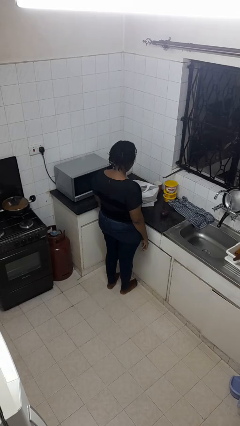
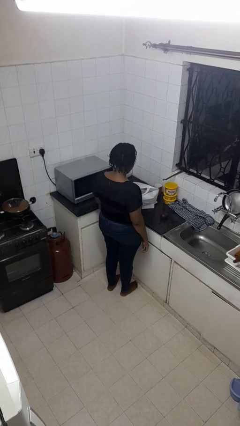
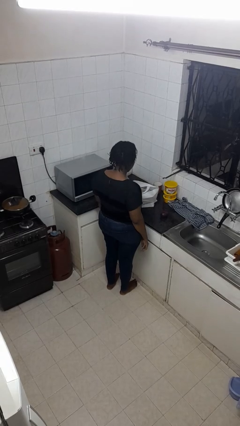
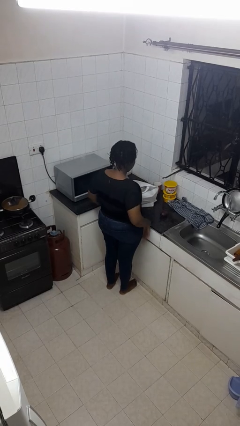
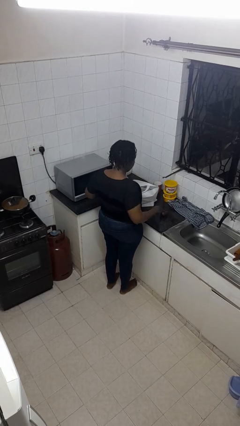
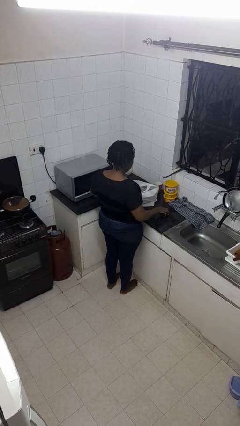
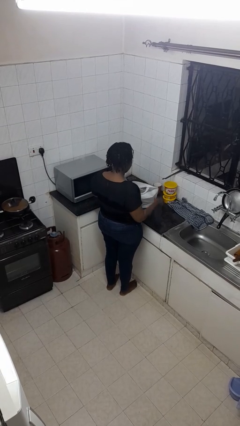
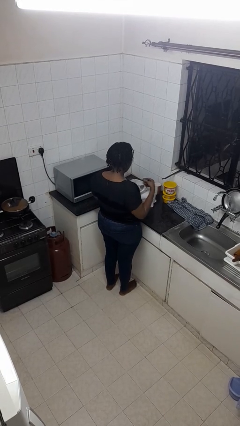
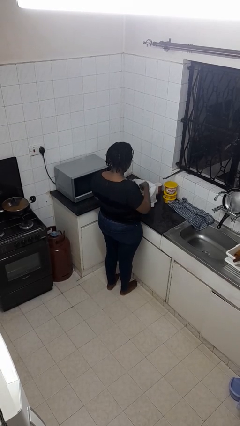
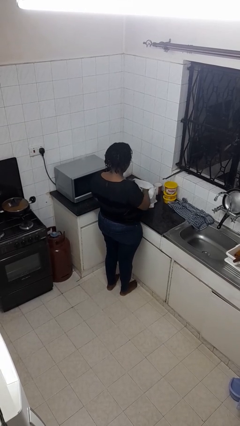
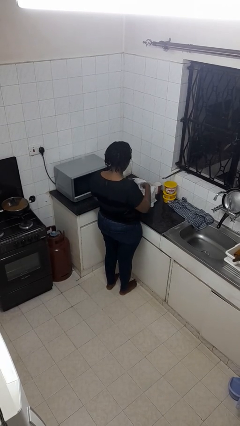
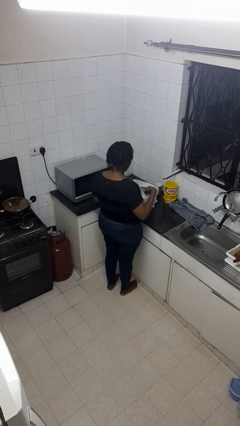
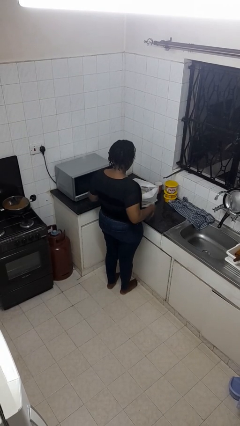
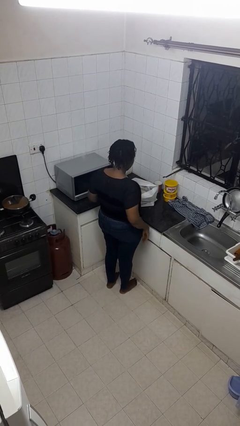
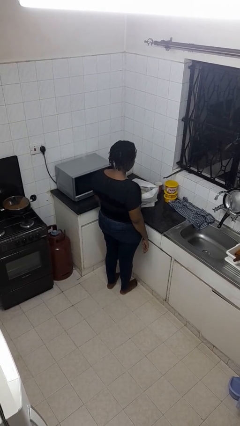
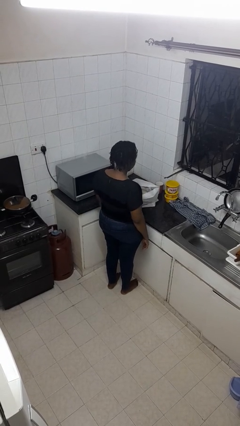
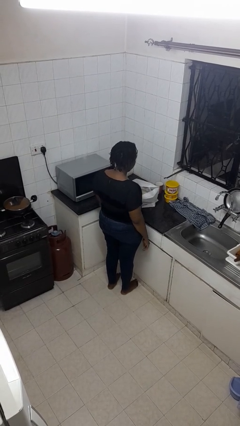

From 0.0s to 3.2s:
person puts object into bag

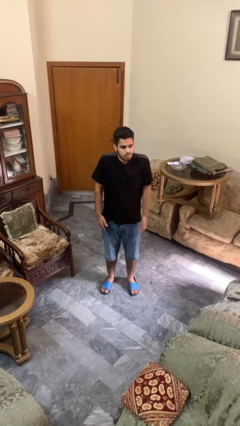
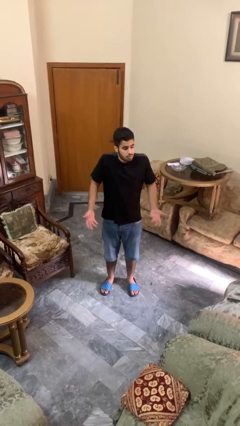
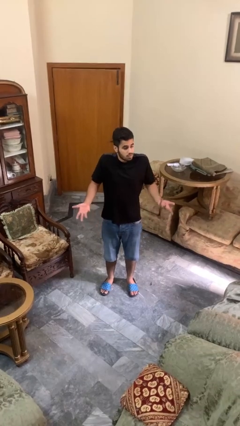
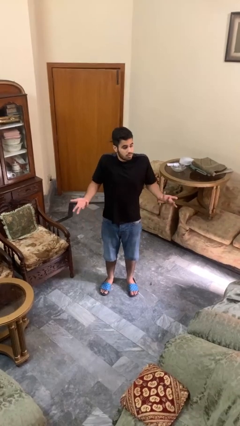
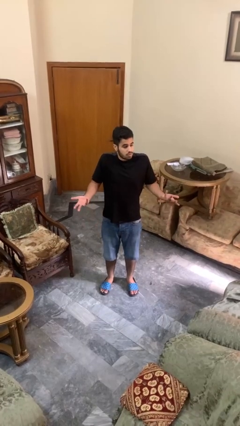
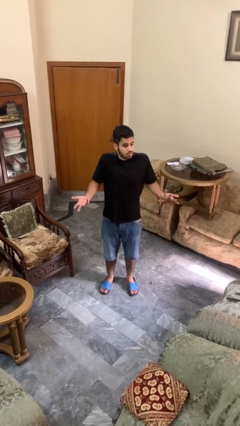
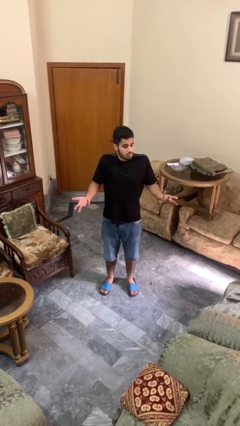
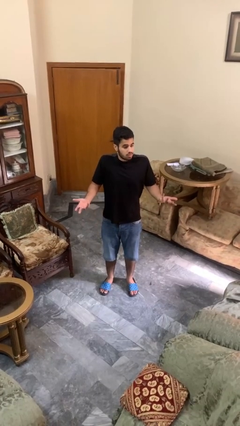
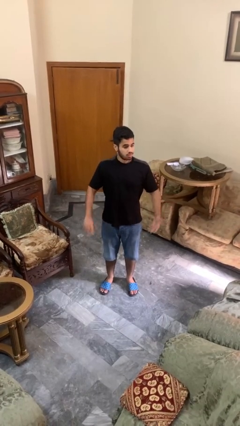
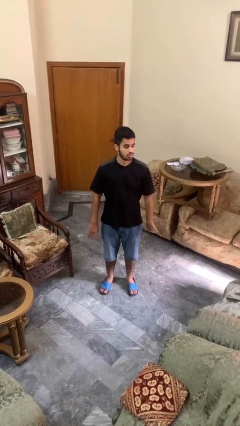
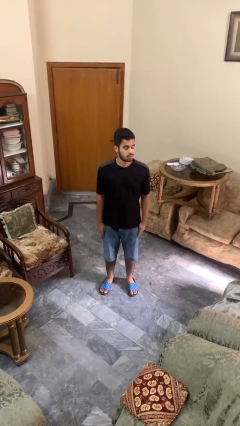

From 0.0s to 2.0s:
person shrugs

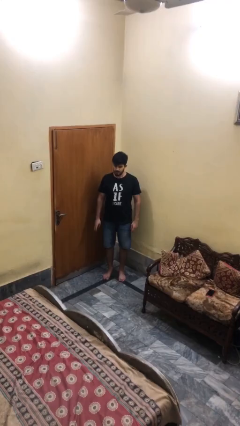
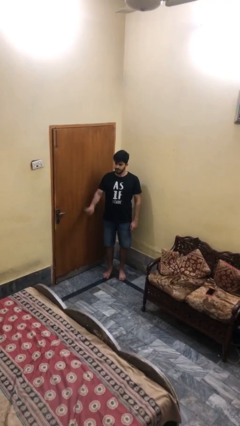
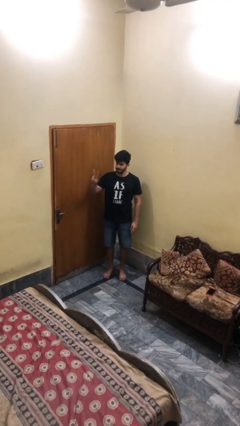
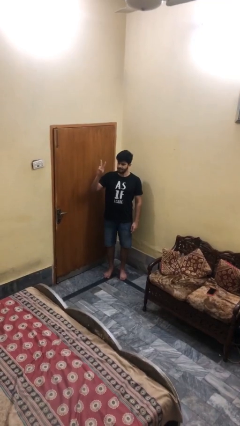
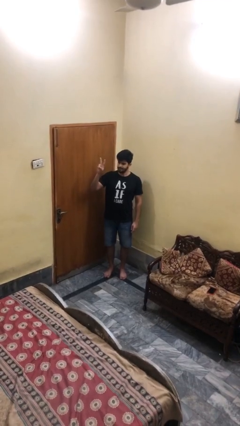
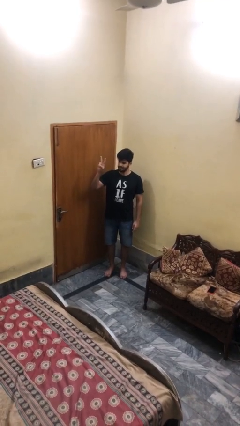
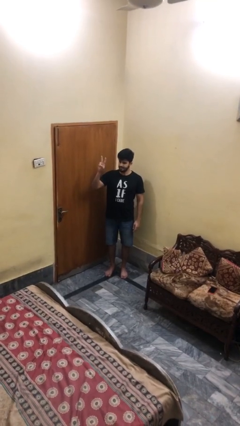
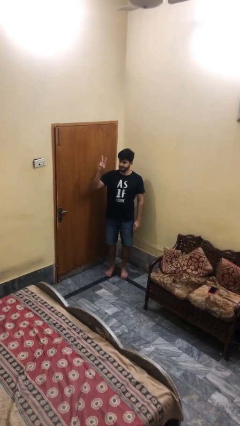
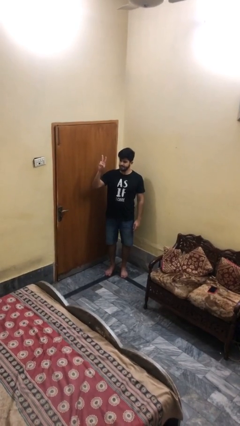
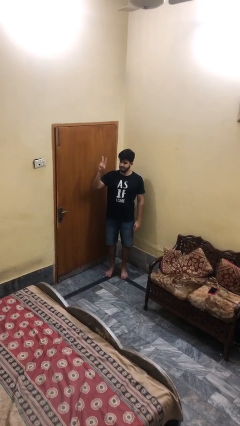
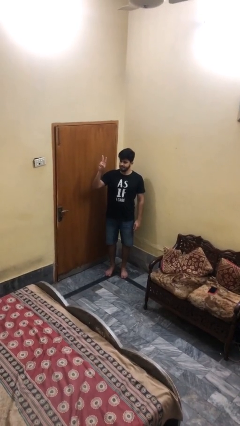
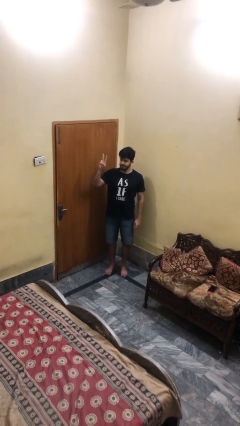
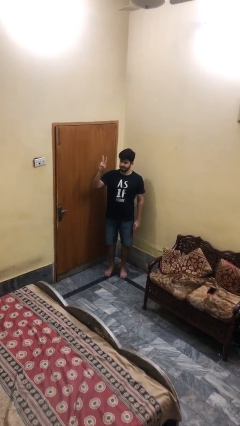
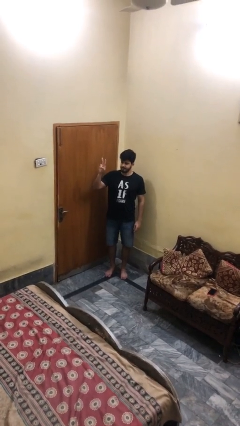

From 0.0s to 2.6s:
person gestures peace

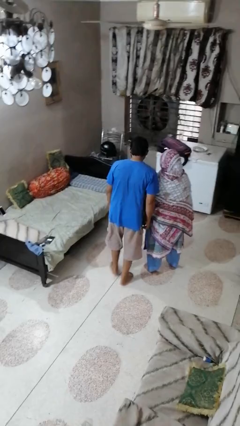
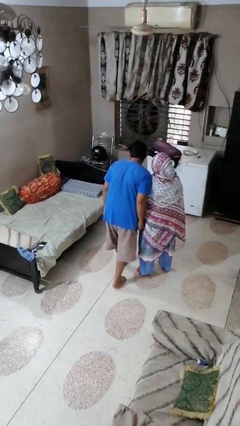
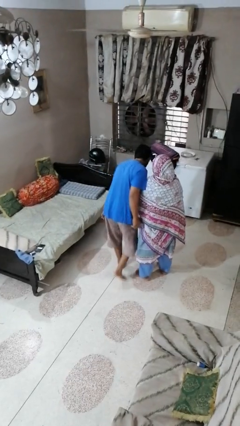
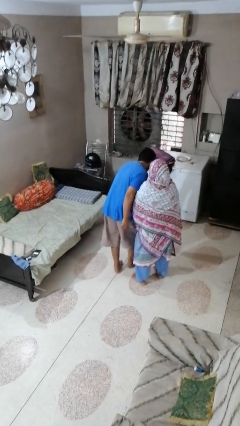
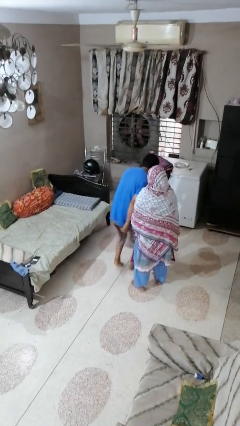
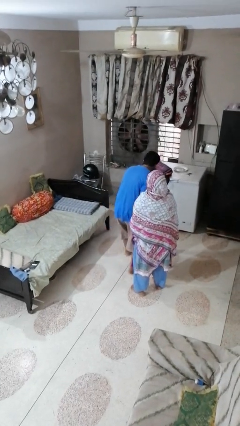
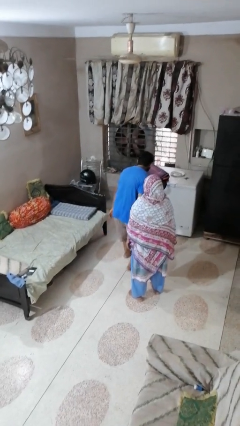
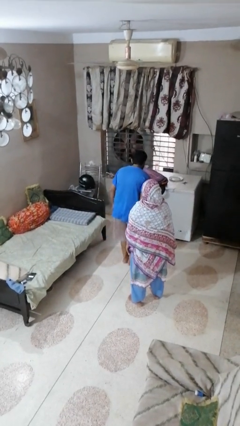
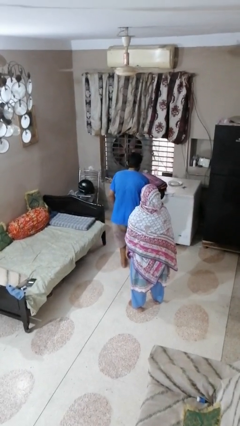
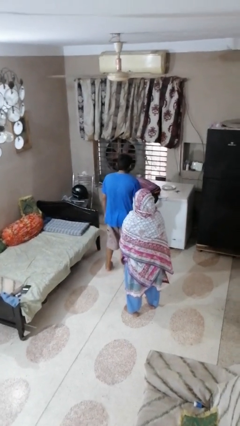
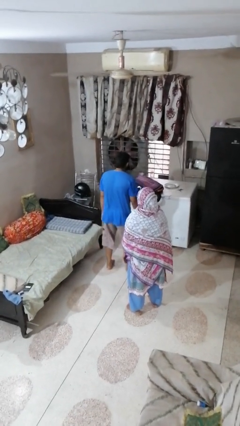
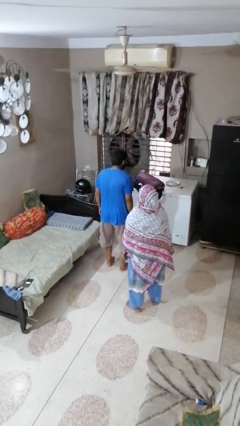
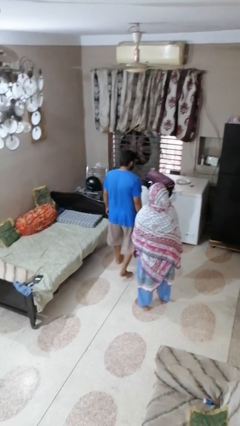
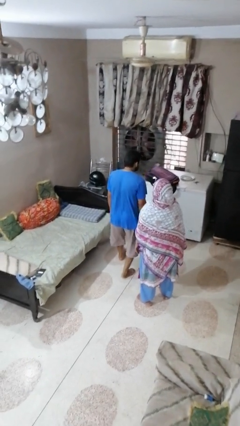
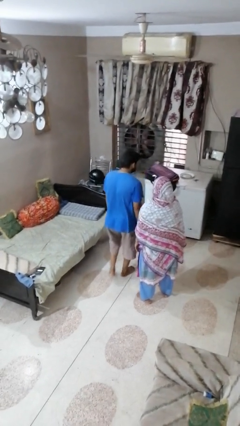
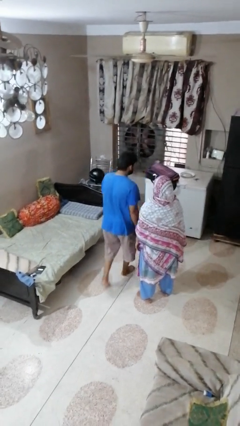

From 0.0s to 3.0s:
person bumps into person

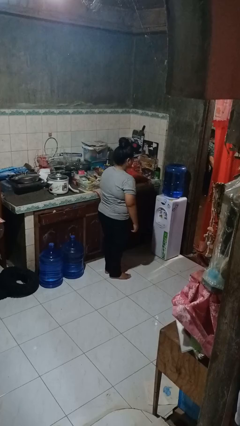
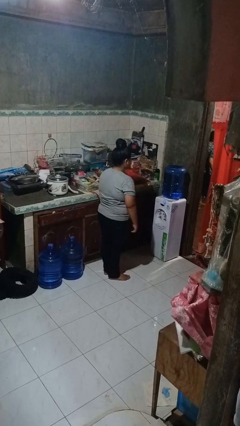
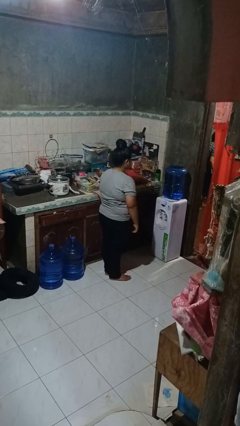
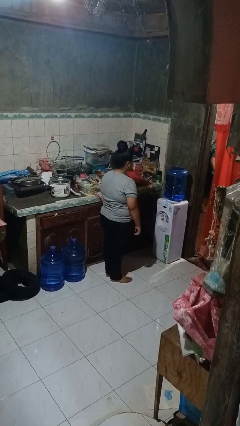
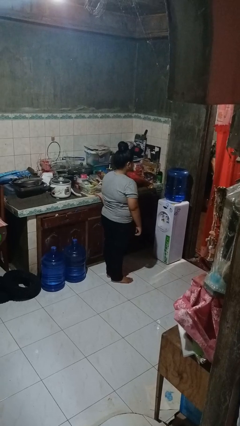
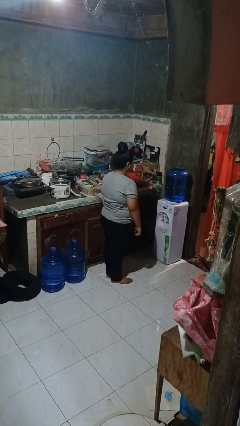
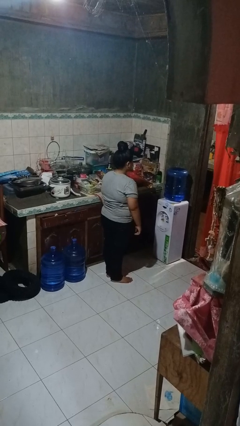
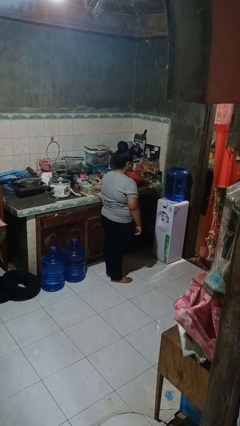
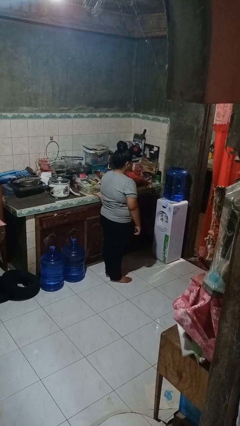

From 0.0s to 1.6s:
person stands up from floor

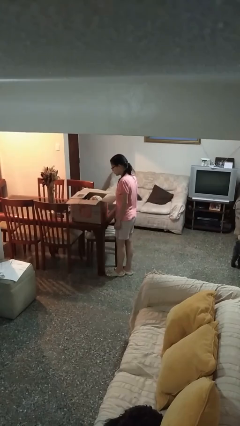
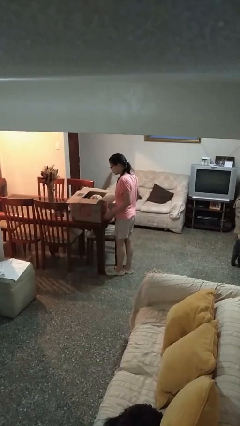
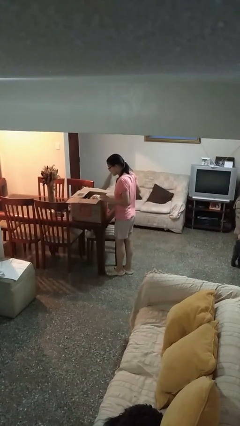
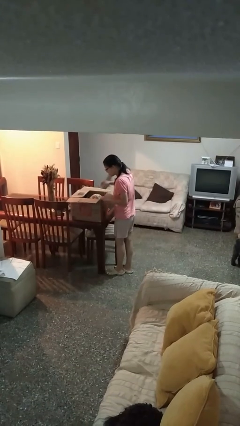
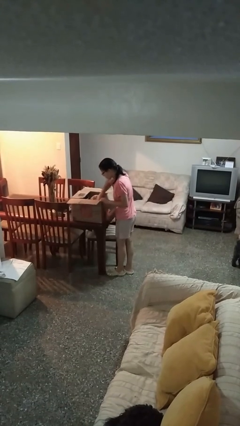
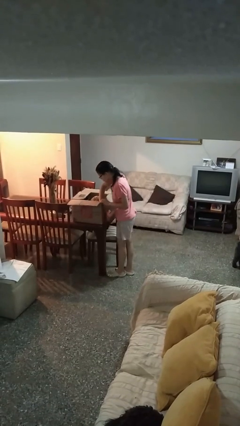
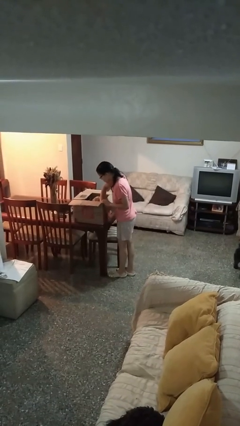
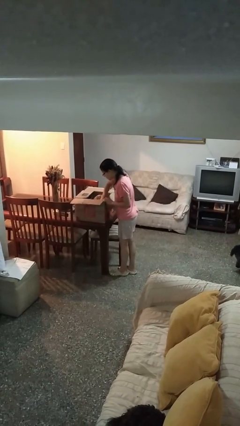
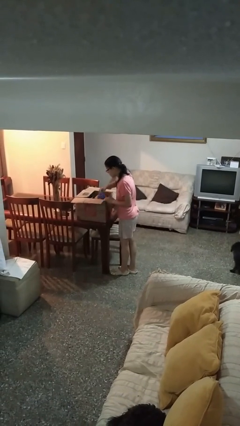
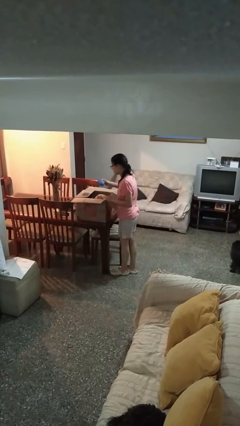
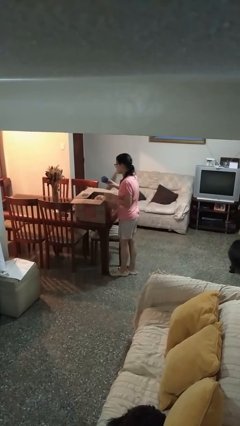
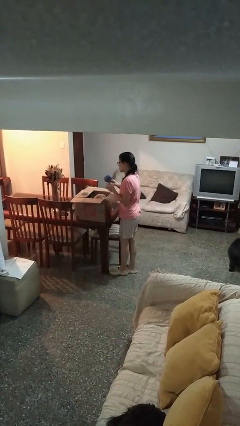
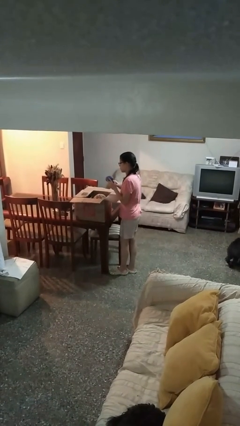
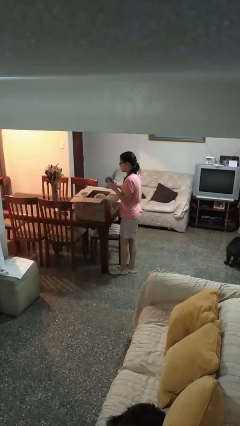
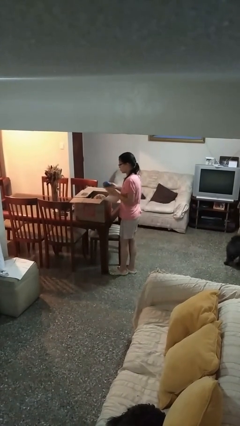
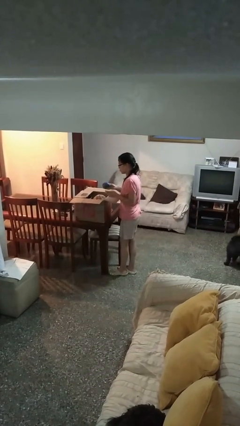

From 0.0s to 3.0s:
person searches in box

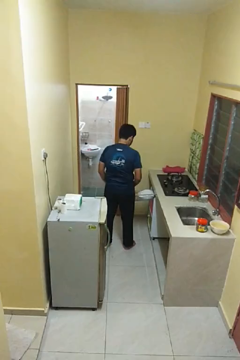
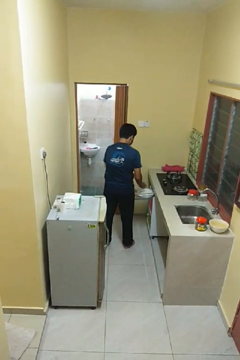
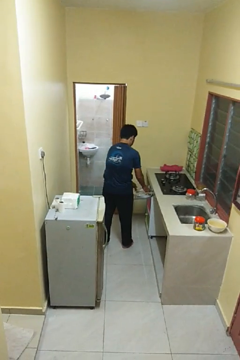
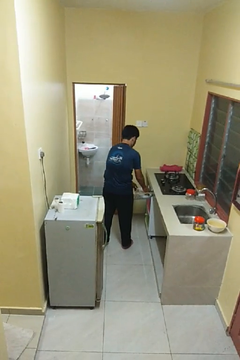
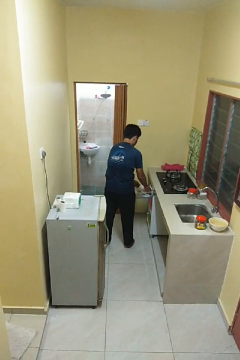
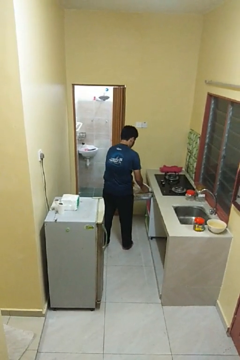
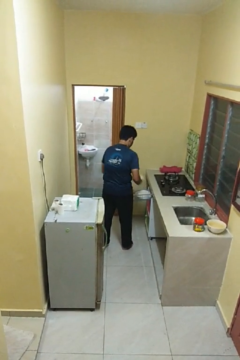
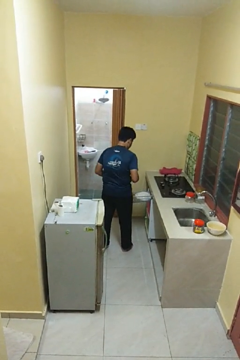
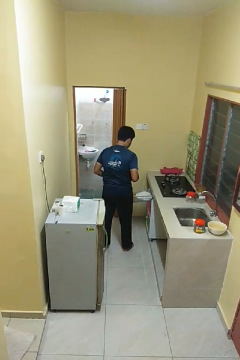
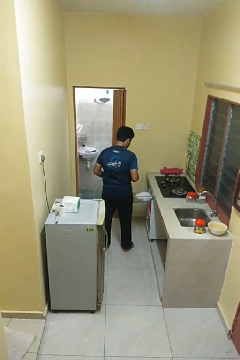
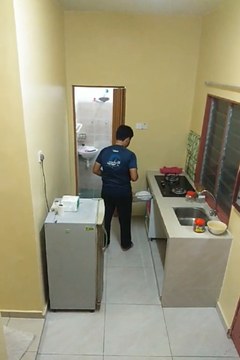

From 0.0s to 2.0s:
person takes object from kitchen drawer
